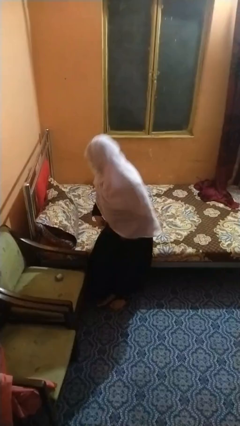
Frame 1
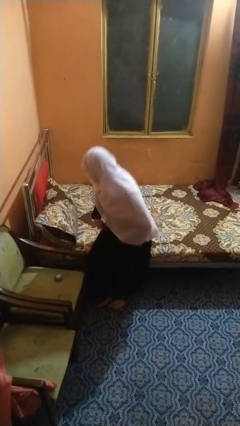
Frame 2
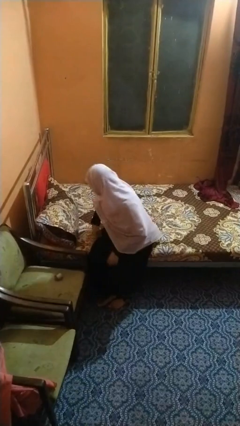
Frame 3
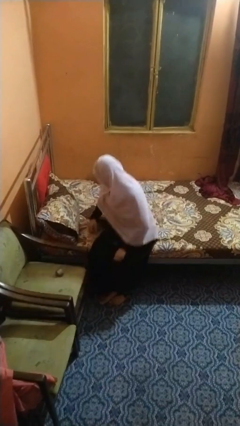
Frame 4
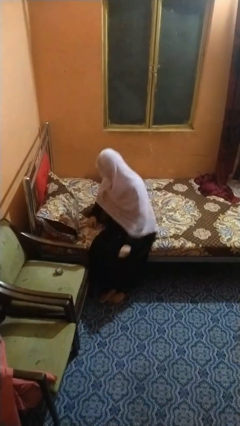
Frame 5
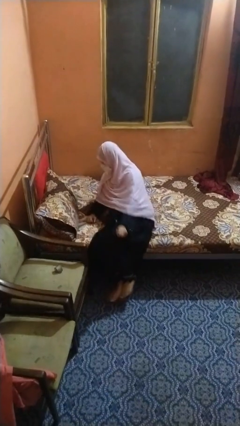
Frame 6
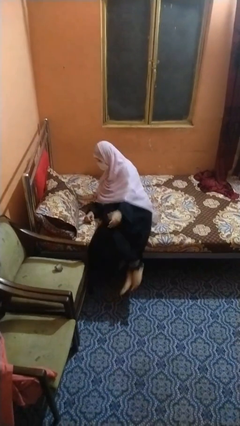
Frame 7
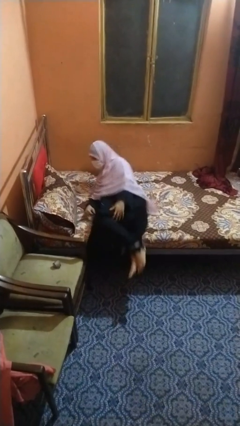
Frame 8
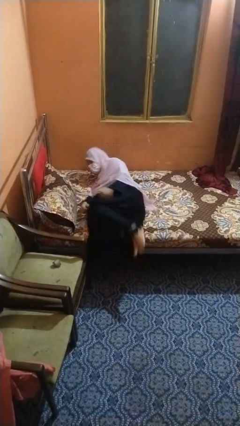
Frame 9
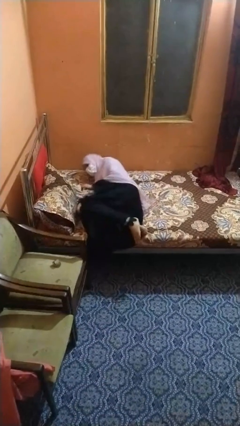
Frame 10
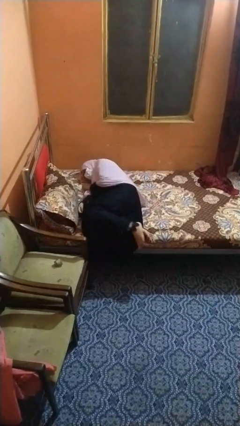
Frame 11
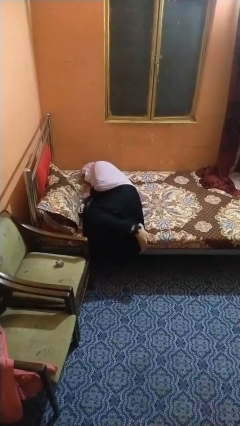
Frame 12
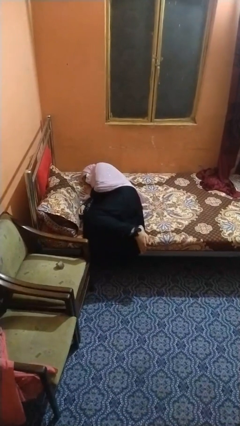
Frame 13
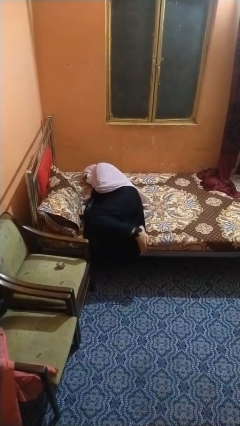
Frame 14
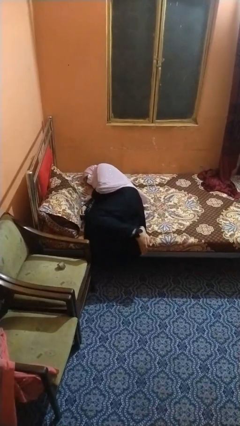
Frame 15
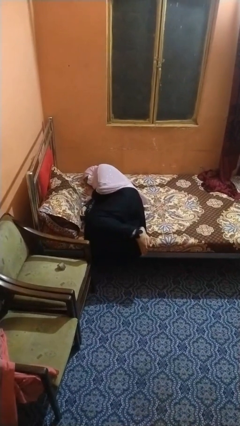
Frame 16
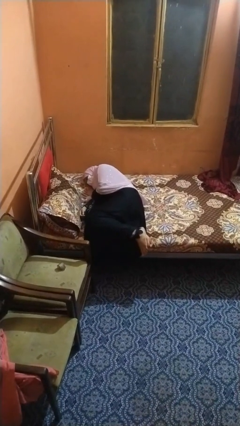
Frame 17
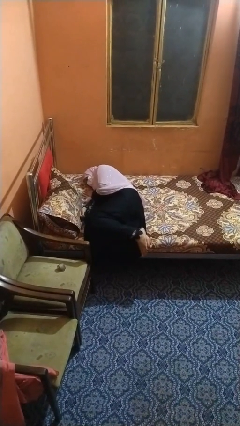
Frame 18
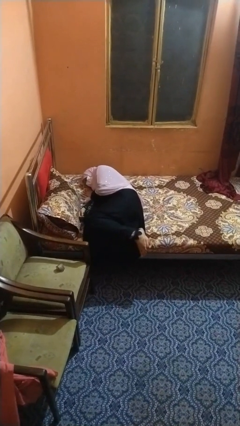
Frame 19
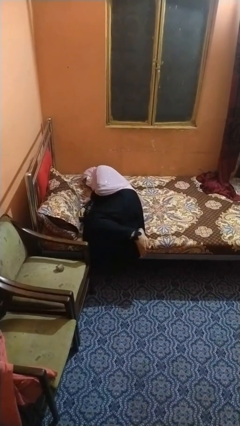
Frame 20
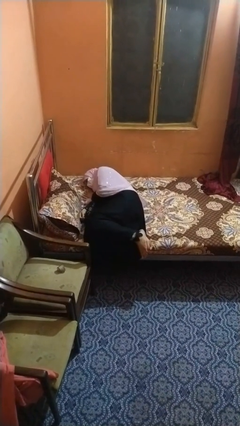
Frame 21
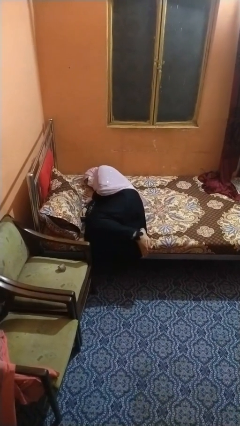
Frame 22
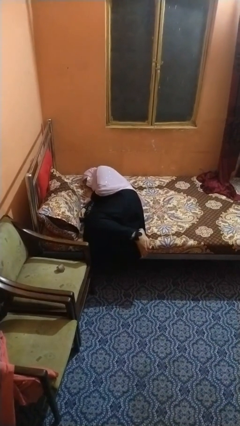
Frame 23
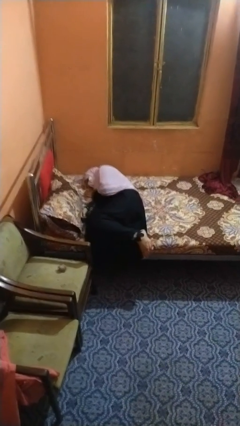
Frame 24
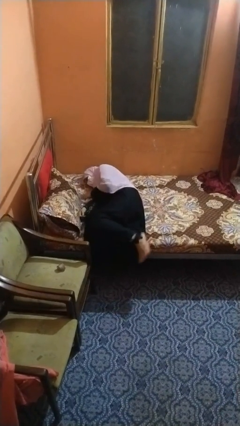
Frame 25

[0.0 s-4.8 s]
person lies down on bed

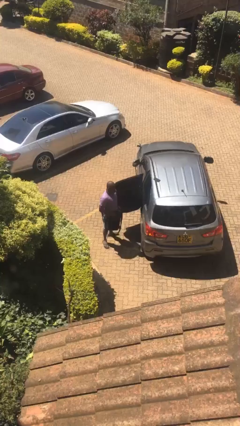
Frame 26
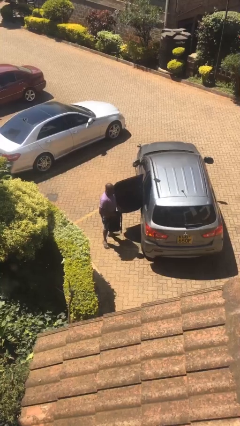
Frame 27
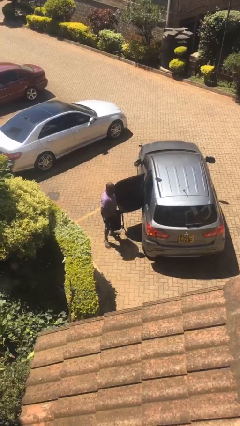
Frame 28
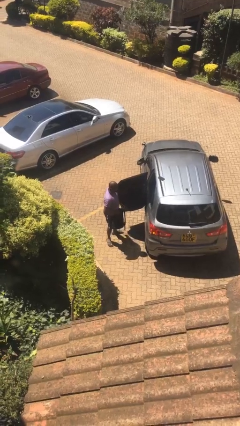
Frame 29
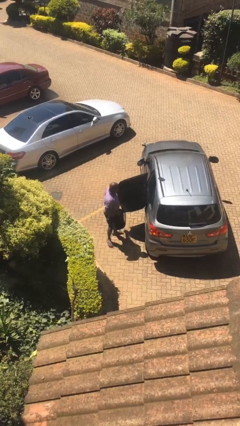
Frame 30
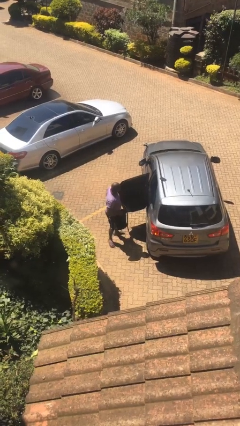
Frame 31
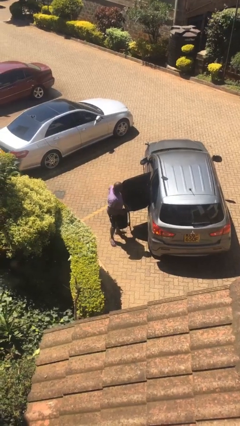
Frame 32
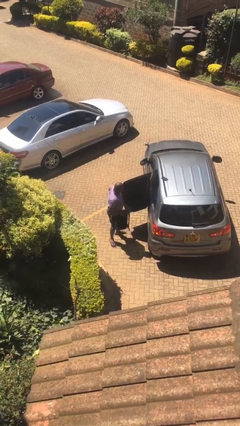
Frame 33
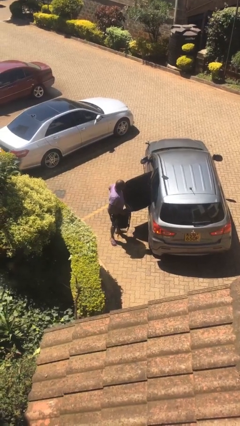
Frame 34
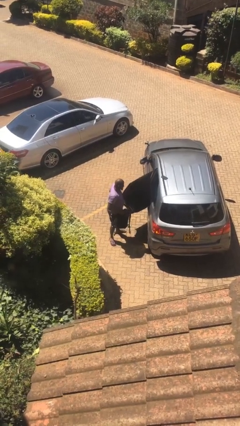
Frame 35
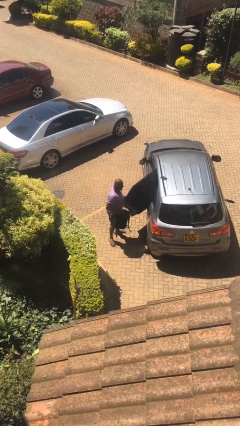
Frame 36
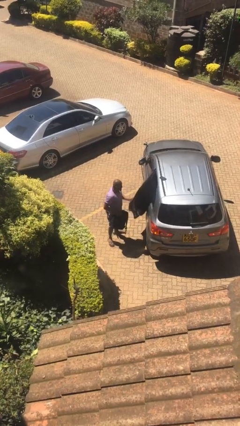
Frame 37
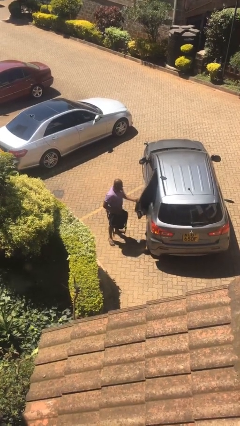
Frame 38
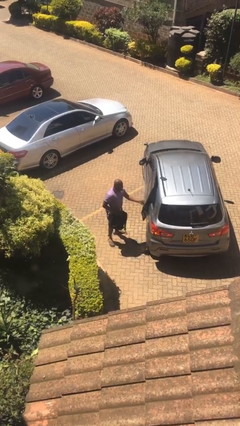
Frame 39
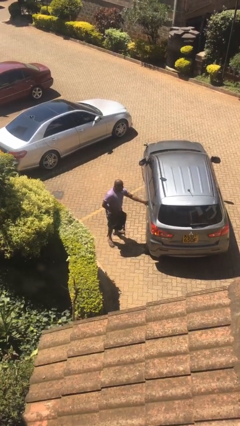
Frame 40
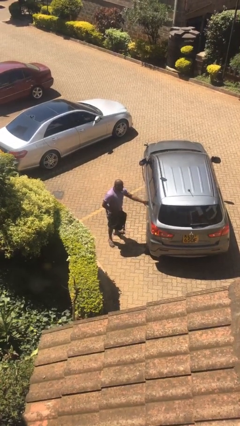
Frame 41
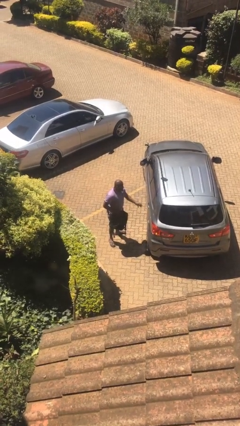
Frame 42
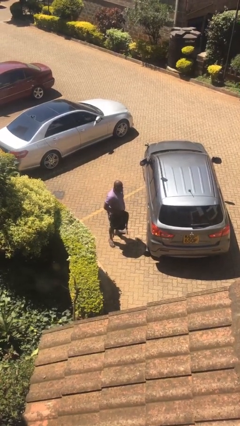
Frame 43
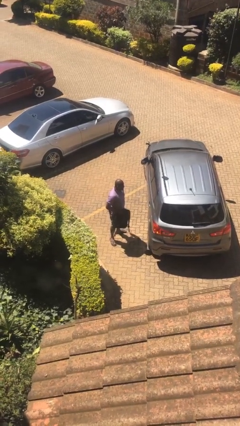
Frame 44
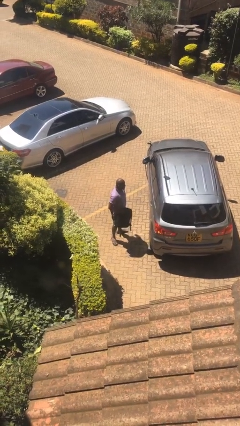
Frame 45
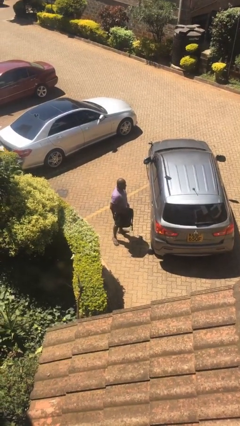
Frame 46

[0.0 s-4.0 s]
person closes car door

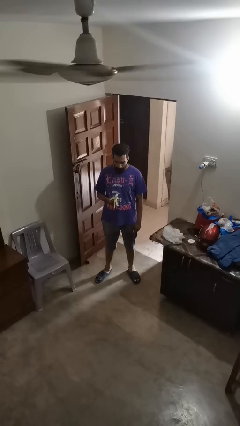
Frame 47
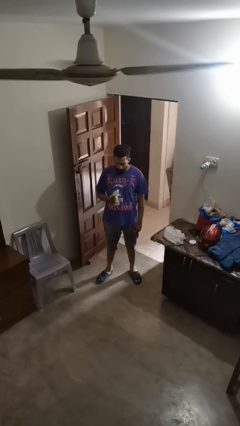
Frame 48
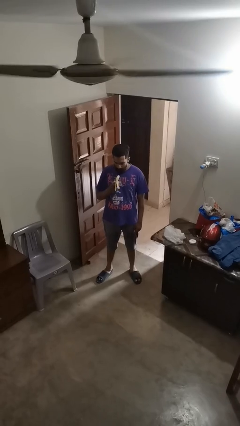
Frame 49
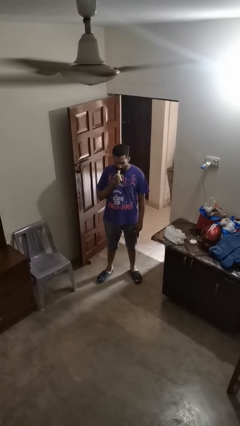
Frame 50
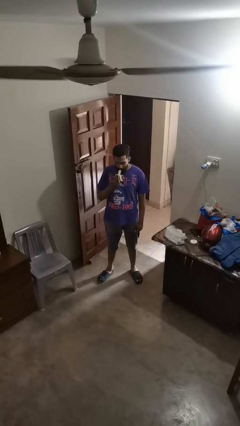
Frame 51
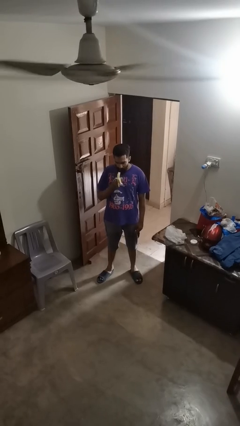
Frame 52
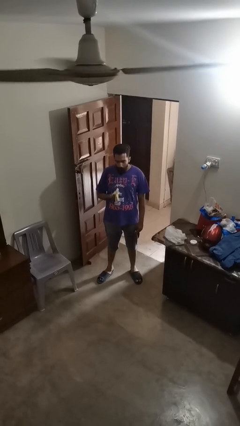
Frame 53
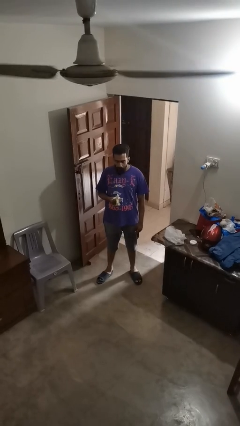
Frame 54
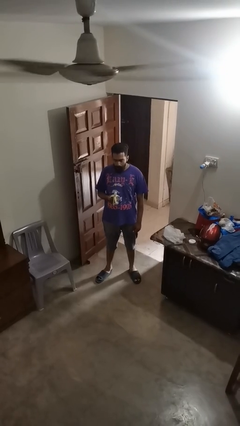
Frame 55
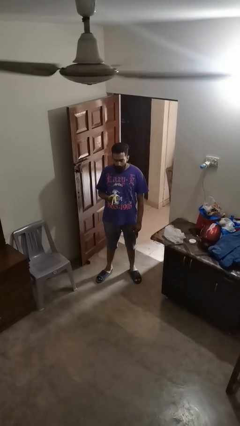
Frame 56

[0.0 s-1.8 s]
person eats banana

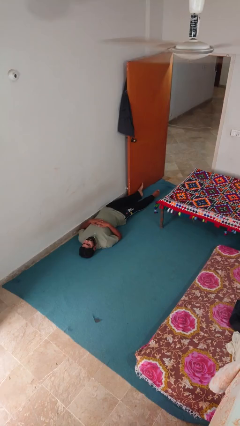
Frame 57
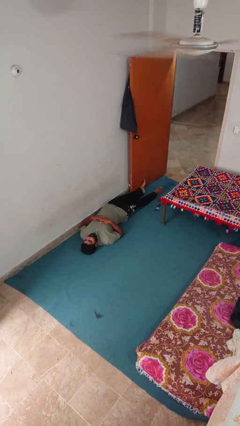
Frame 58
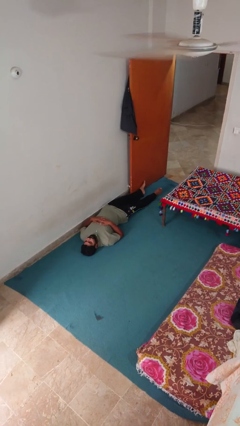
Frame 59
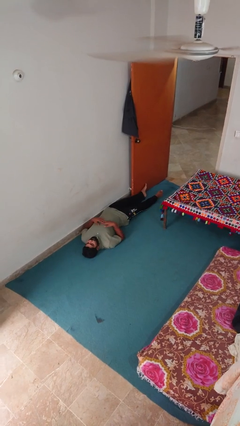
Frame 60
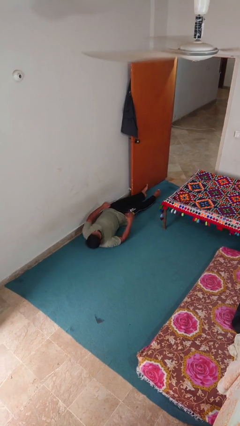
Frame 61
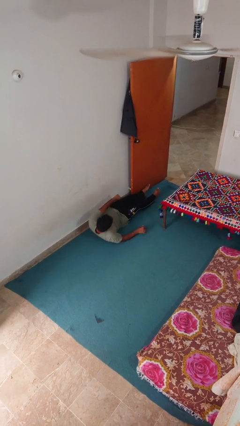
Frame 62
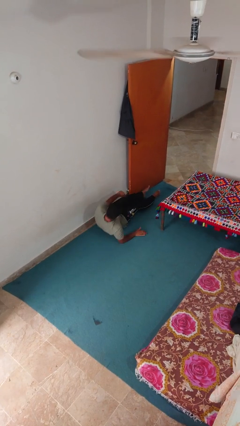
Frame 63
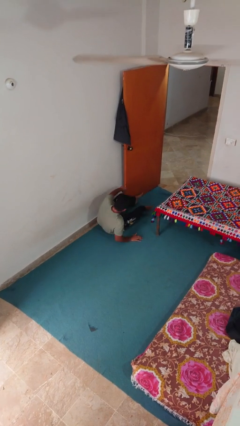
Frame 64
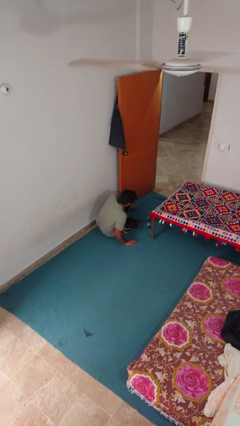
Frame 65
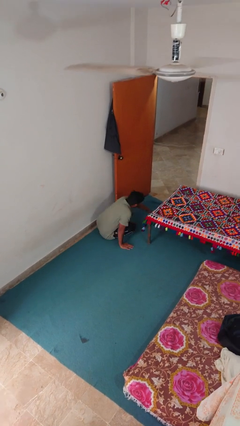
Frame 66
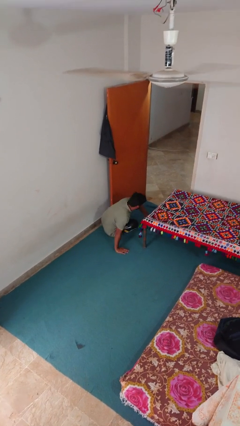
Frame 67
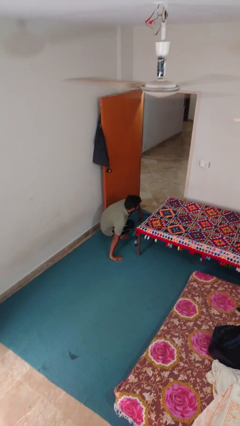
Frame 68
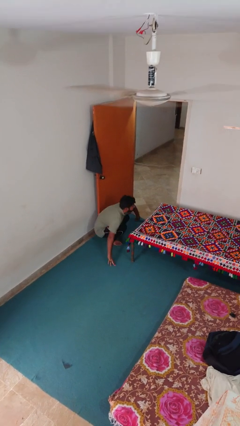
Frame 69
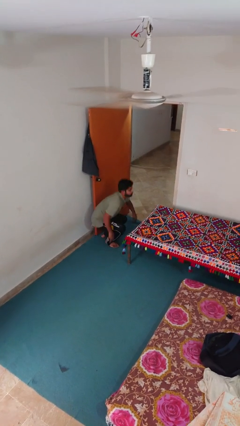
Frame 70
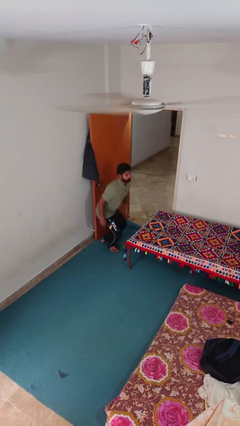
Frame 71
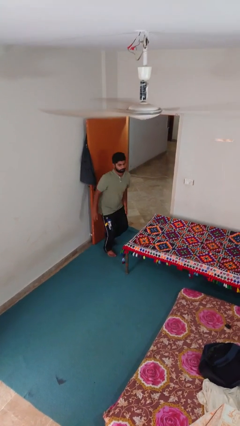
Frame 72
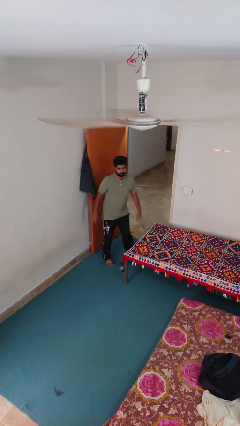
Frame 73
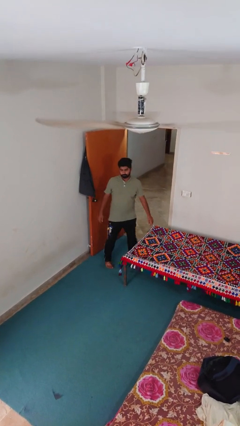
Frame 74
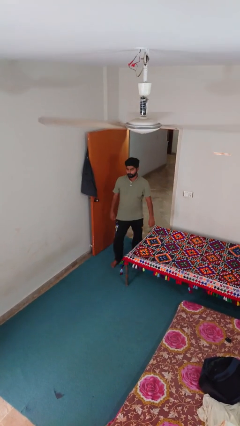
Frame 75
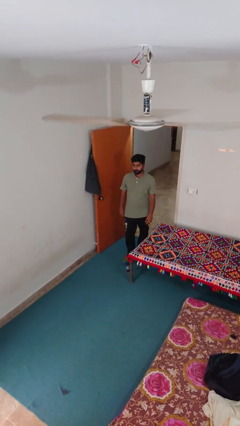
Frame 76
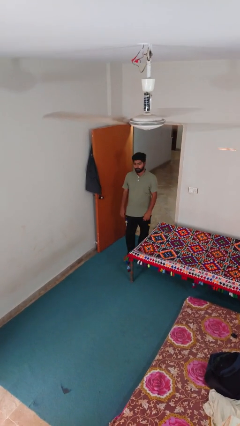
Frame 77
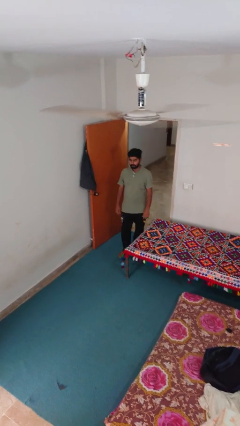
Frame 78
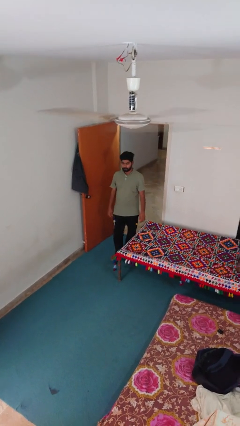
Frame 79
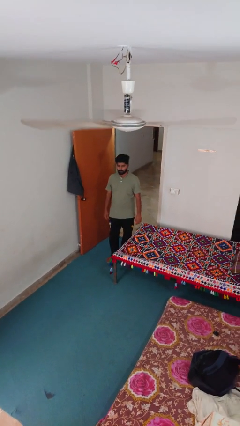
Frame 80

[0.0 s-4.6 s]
person stands up from floor

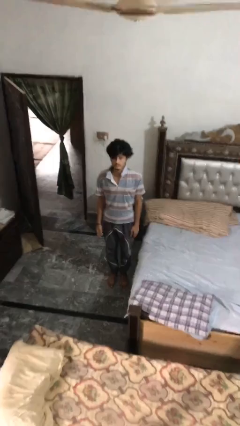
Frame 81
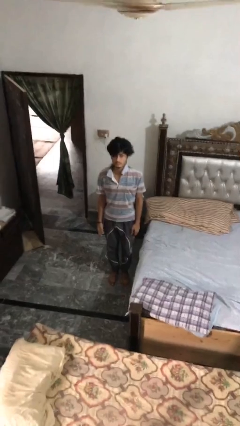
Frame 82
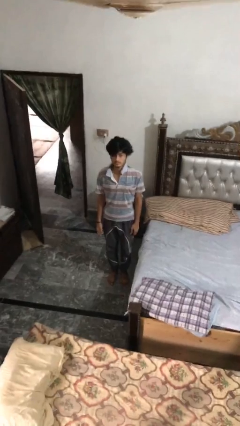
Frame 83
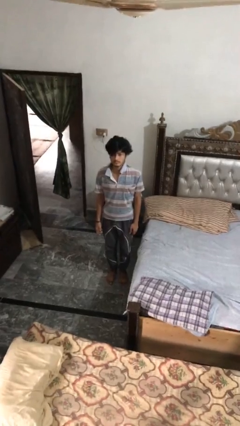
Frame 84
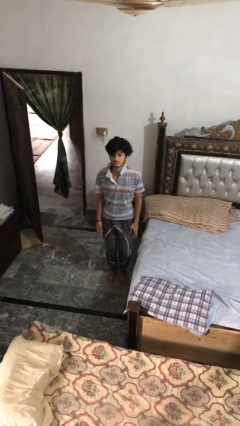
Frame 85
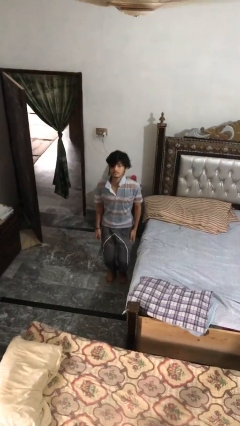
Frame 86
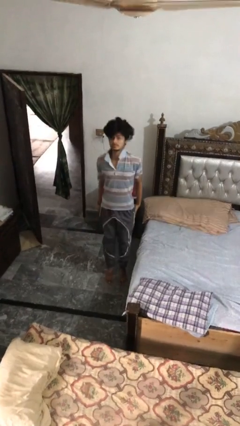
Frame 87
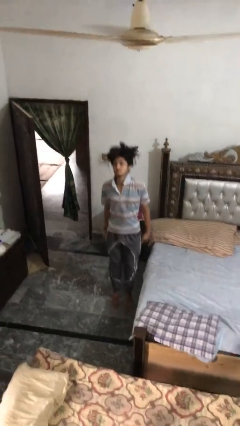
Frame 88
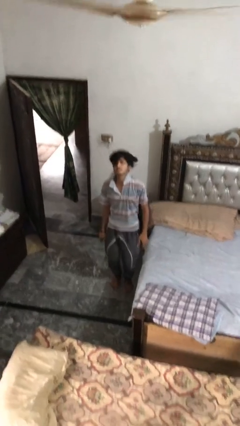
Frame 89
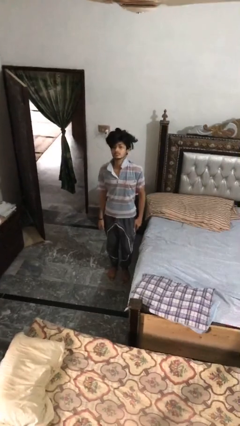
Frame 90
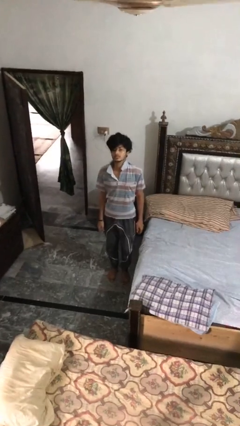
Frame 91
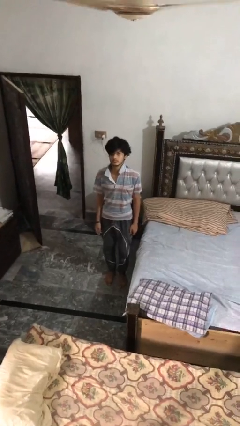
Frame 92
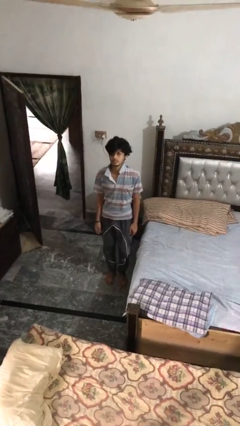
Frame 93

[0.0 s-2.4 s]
person jumps
